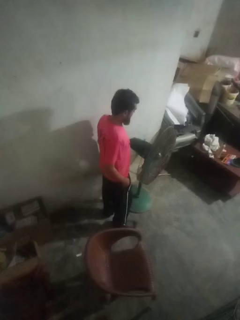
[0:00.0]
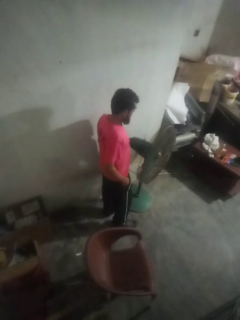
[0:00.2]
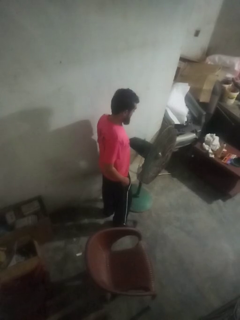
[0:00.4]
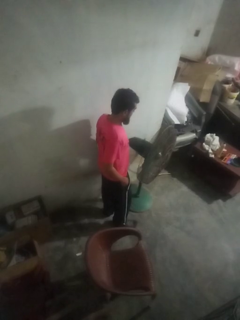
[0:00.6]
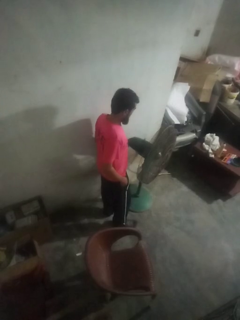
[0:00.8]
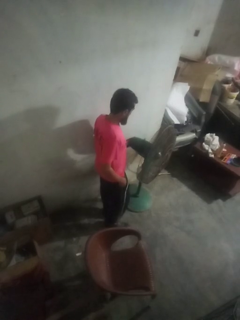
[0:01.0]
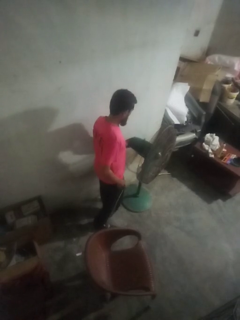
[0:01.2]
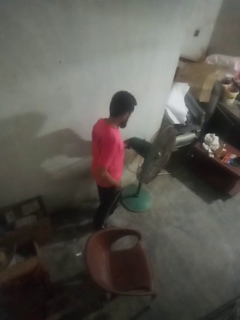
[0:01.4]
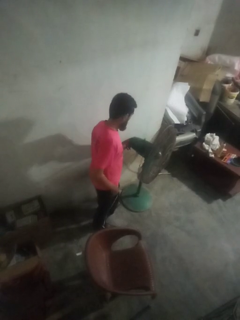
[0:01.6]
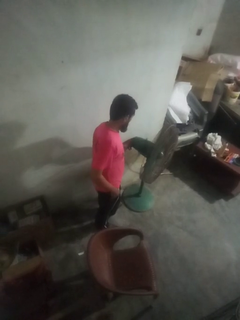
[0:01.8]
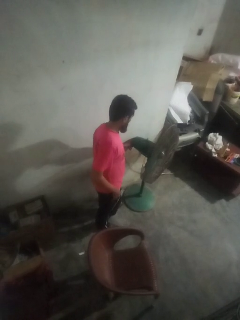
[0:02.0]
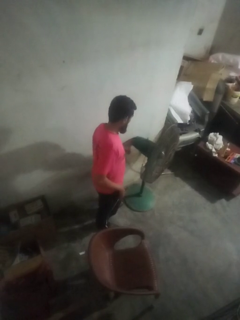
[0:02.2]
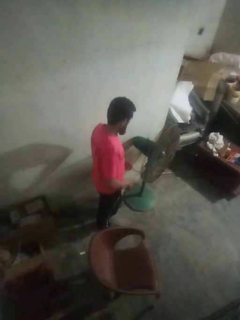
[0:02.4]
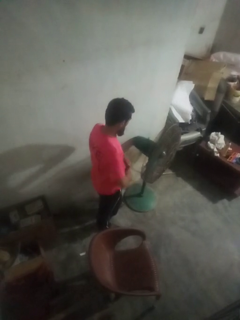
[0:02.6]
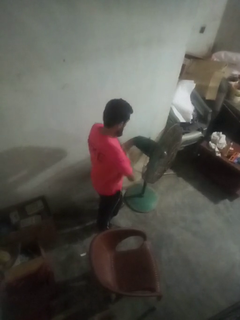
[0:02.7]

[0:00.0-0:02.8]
person turns off fan

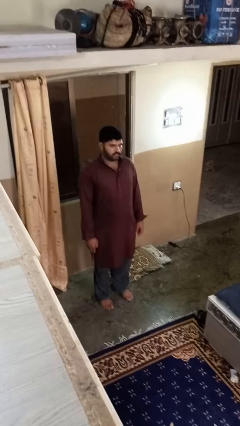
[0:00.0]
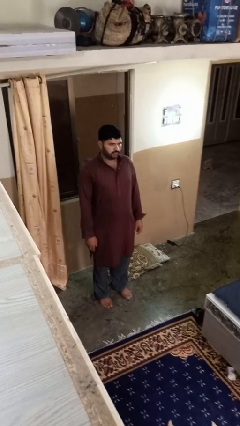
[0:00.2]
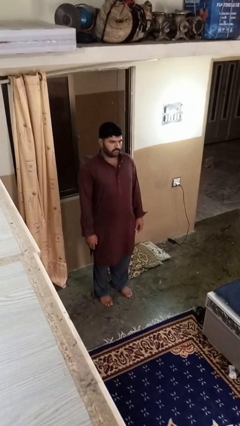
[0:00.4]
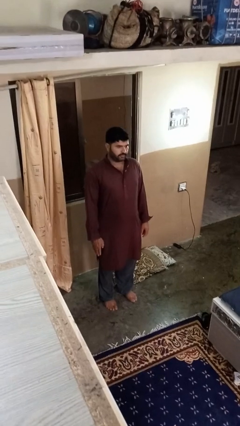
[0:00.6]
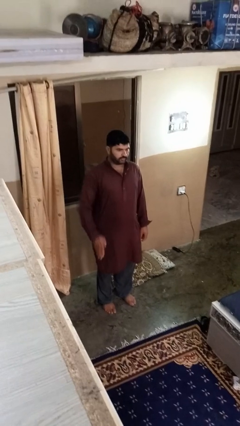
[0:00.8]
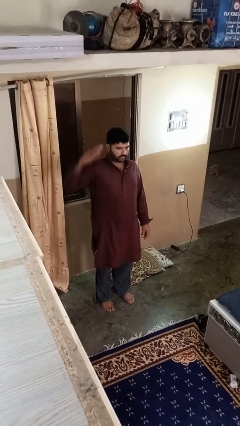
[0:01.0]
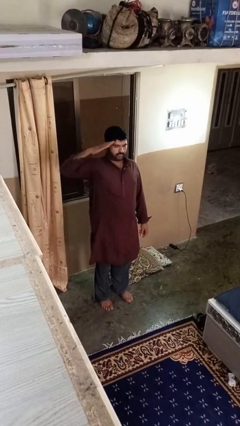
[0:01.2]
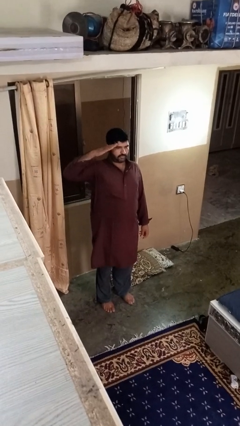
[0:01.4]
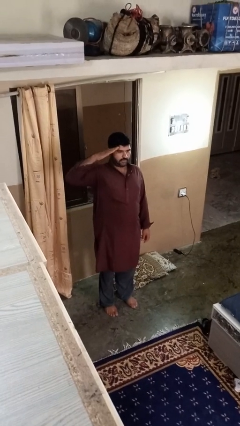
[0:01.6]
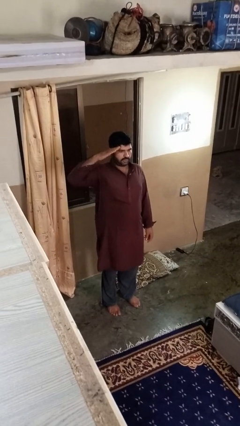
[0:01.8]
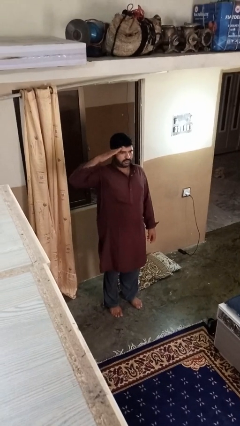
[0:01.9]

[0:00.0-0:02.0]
person salutes

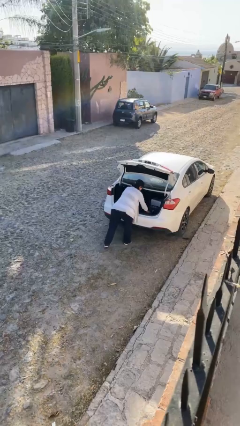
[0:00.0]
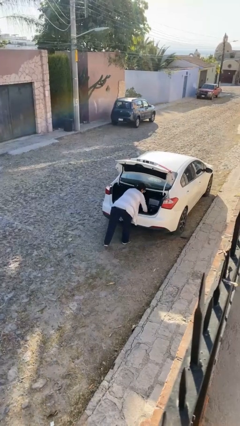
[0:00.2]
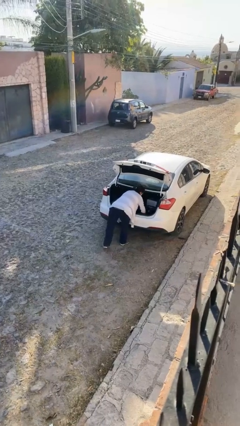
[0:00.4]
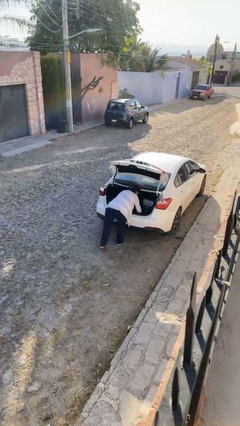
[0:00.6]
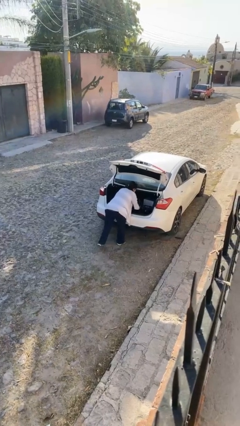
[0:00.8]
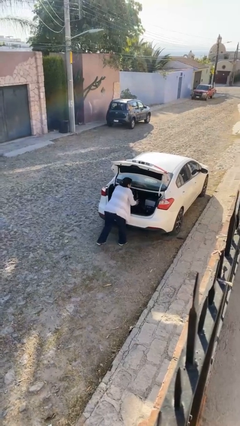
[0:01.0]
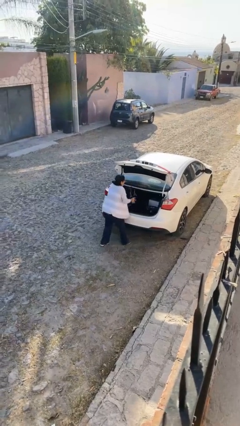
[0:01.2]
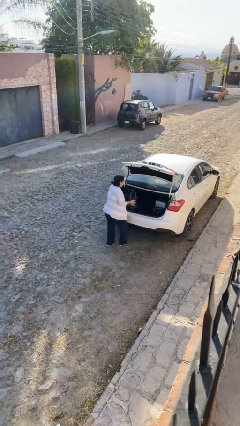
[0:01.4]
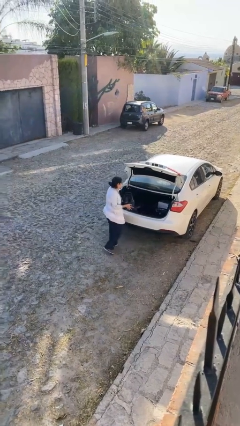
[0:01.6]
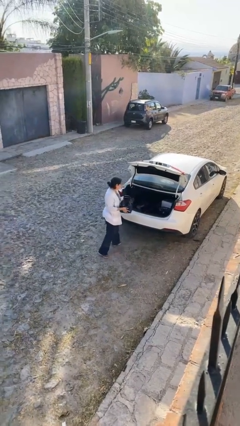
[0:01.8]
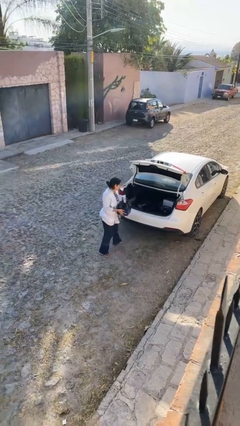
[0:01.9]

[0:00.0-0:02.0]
person unloads car

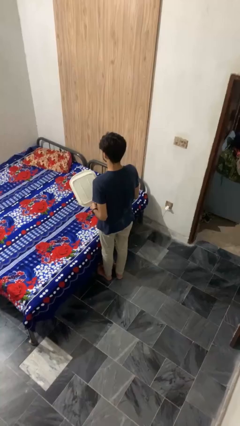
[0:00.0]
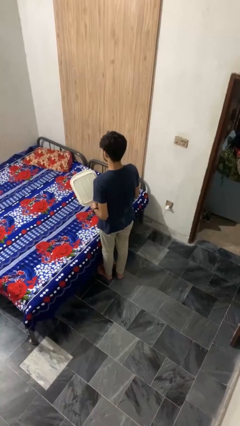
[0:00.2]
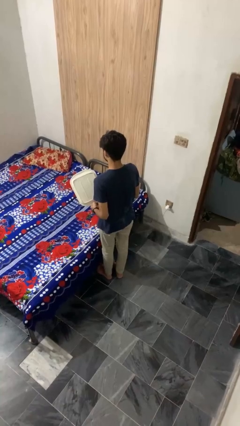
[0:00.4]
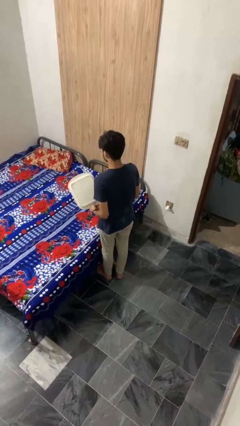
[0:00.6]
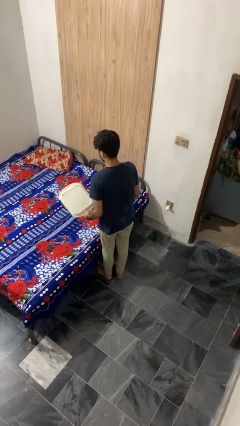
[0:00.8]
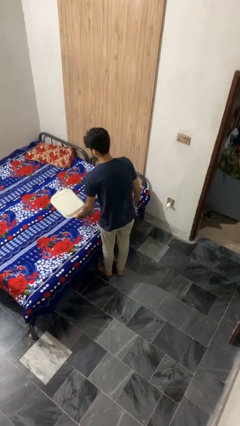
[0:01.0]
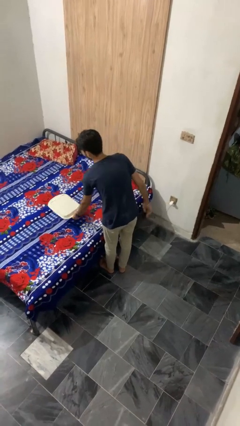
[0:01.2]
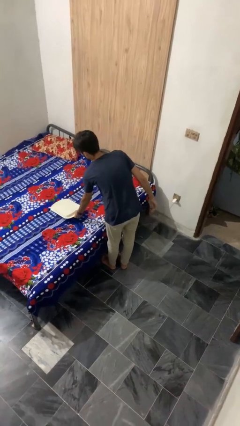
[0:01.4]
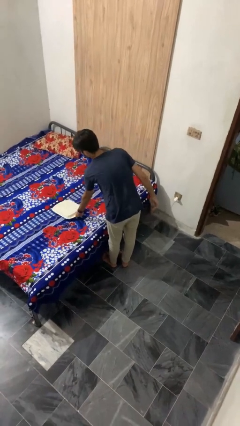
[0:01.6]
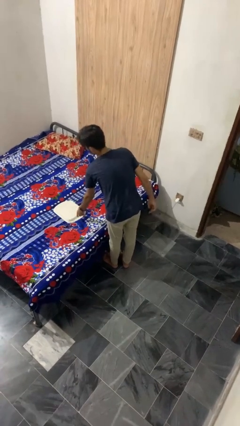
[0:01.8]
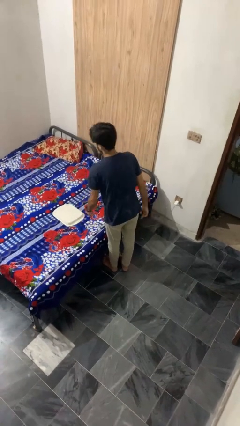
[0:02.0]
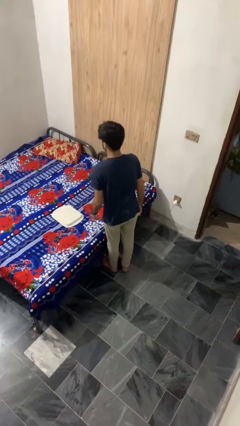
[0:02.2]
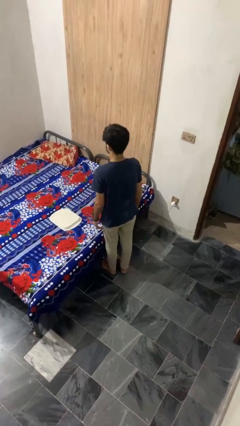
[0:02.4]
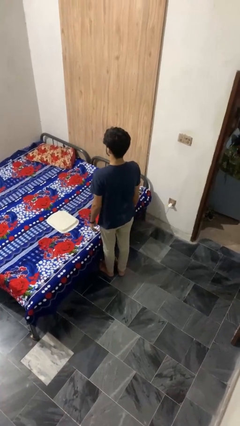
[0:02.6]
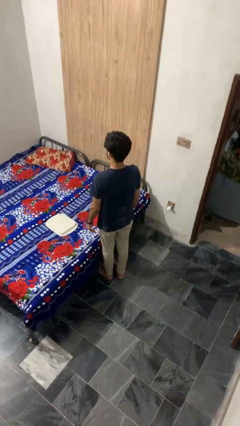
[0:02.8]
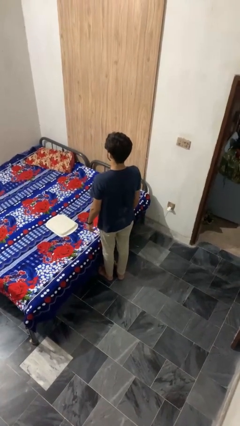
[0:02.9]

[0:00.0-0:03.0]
person puts down object on bed

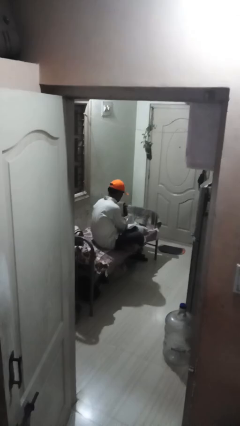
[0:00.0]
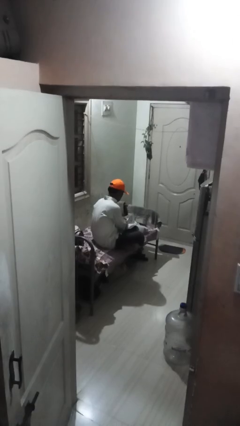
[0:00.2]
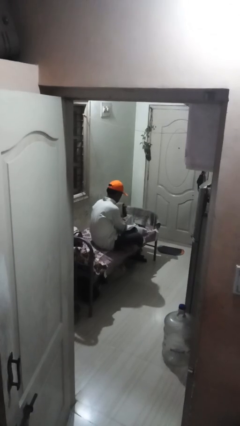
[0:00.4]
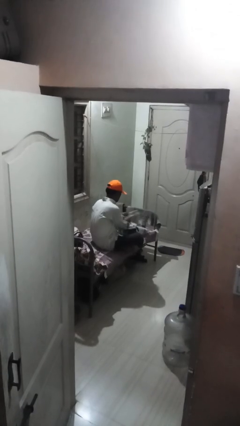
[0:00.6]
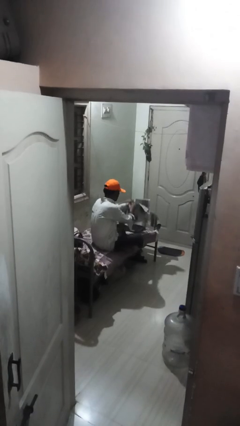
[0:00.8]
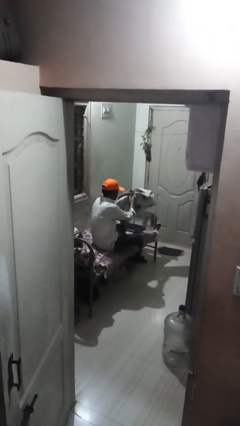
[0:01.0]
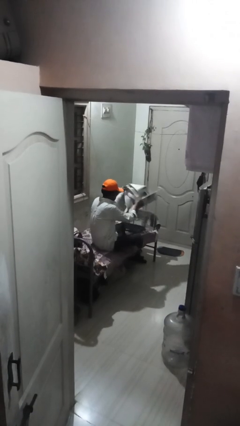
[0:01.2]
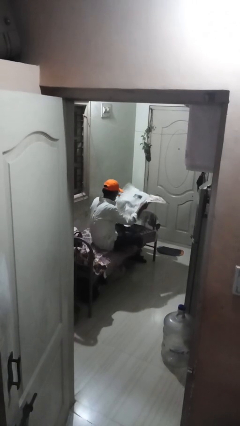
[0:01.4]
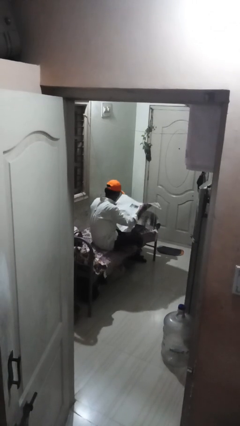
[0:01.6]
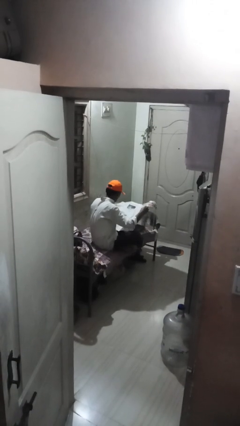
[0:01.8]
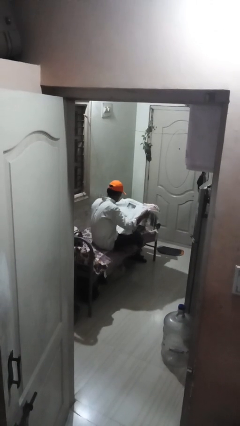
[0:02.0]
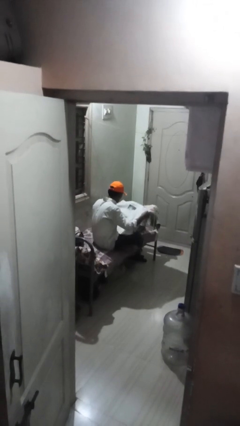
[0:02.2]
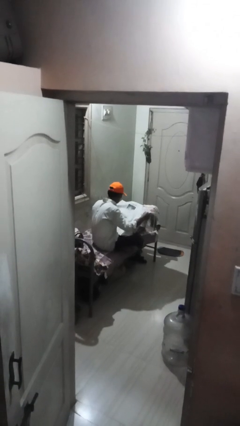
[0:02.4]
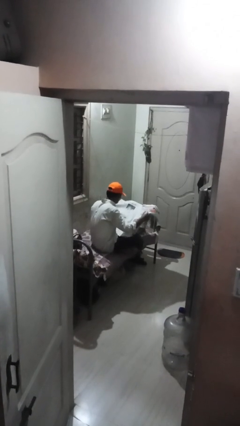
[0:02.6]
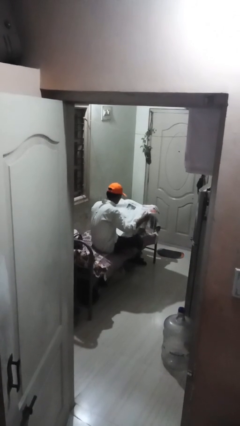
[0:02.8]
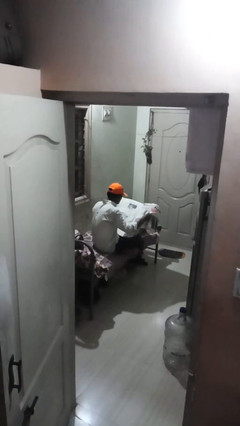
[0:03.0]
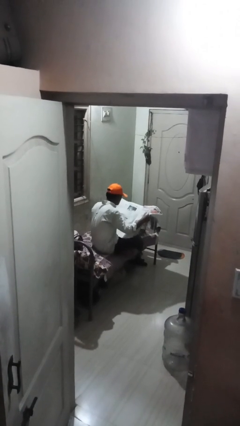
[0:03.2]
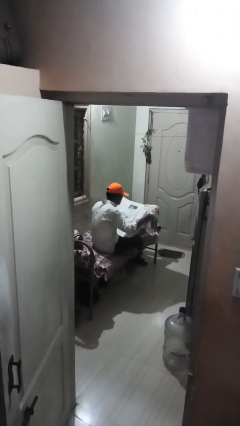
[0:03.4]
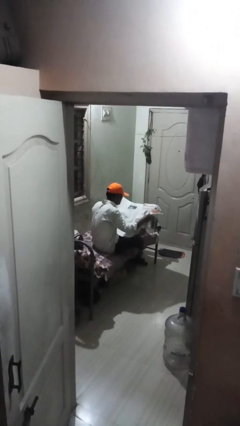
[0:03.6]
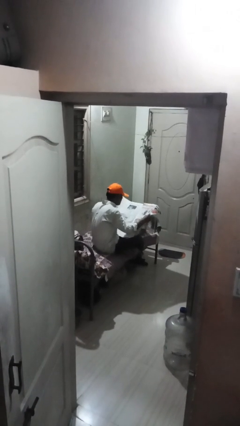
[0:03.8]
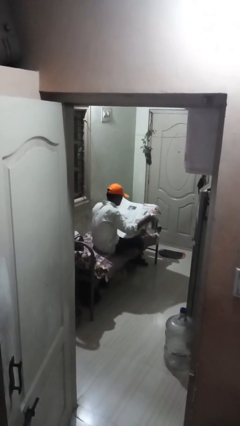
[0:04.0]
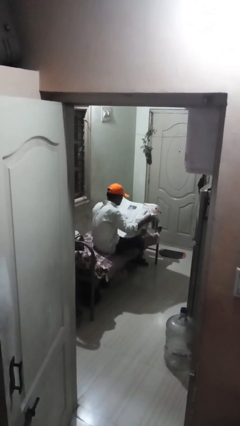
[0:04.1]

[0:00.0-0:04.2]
person reads newspaper

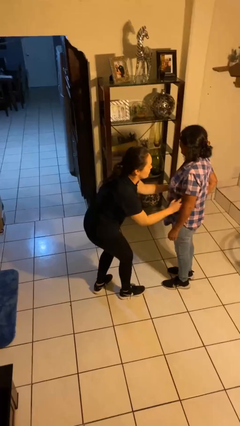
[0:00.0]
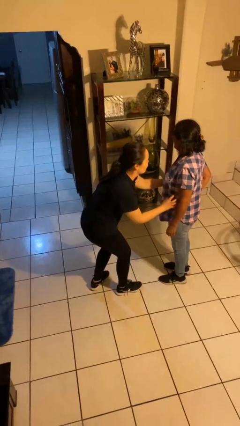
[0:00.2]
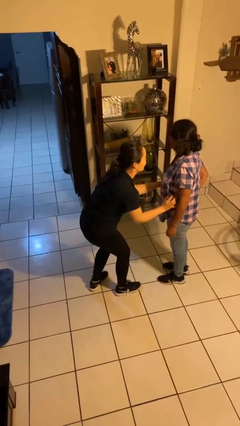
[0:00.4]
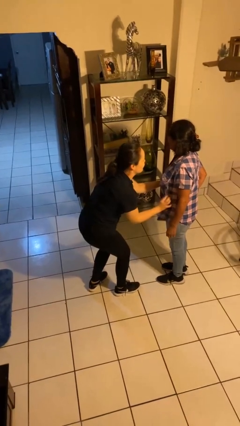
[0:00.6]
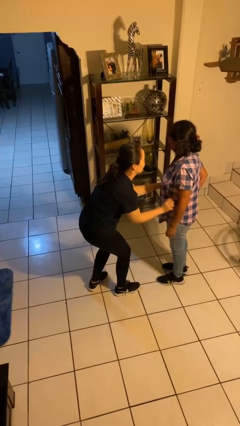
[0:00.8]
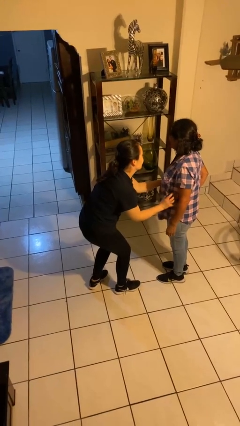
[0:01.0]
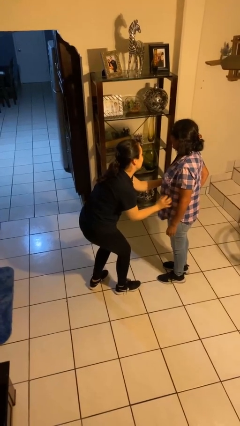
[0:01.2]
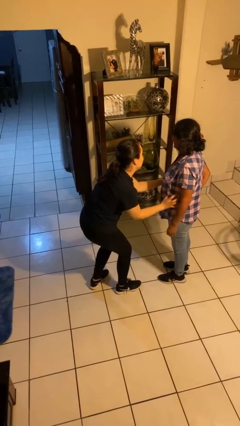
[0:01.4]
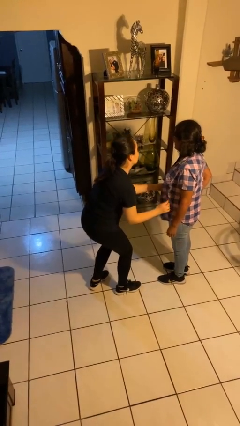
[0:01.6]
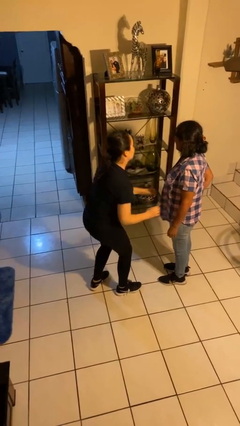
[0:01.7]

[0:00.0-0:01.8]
person tickles person

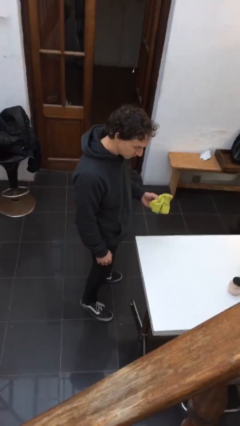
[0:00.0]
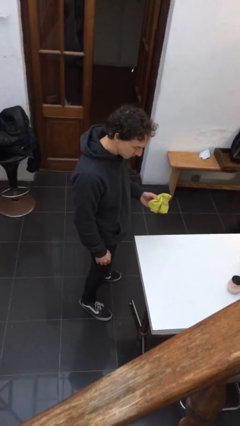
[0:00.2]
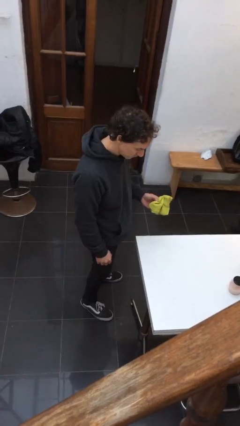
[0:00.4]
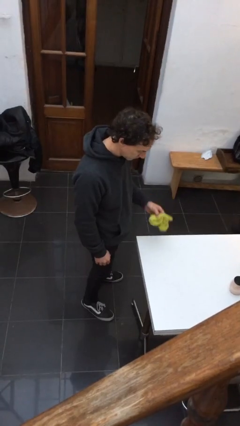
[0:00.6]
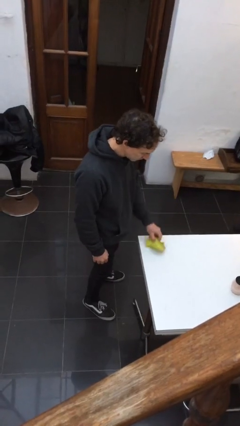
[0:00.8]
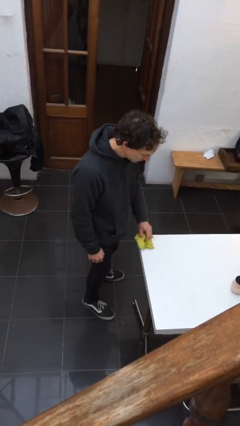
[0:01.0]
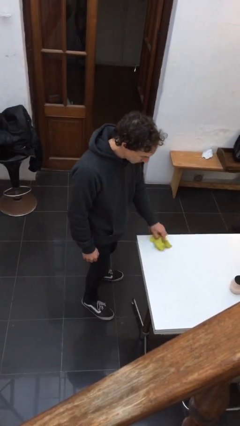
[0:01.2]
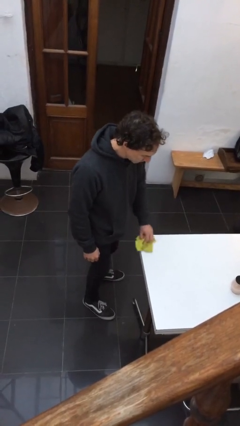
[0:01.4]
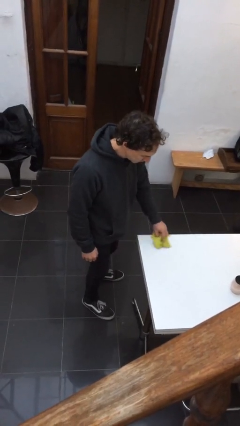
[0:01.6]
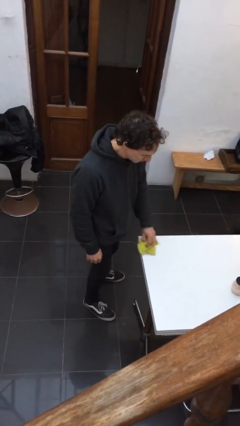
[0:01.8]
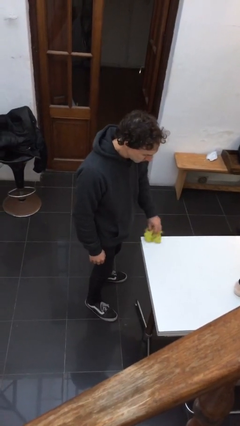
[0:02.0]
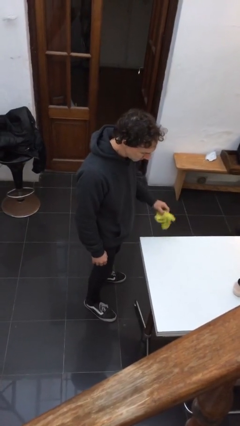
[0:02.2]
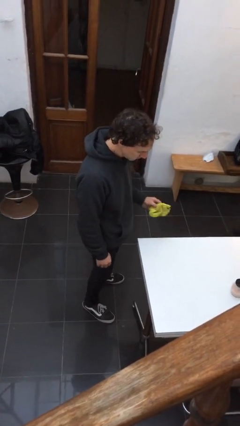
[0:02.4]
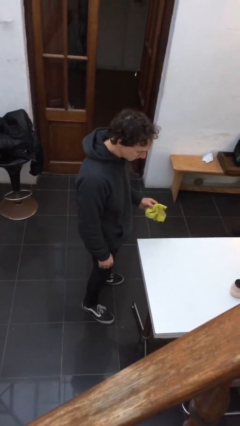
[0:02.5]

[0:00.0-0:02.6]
person cleans table with rag
